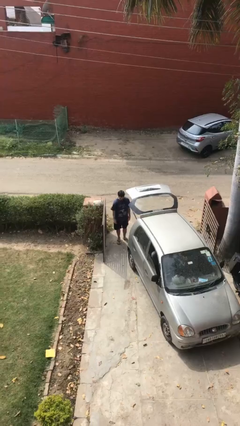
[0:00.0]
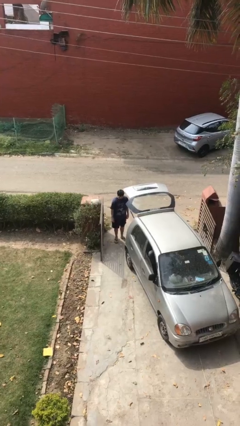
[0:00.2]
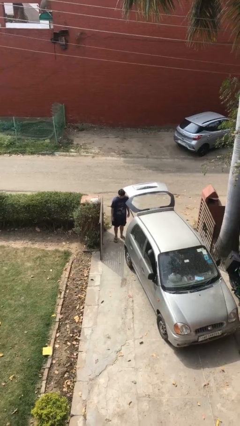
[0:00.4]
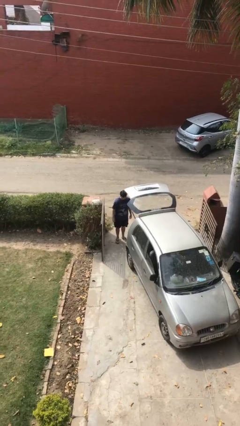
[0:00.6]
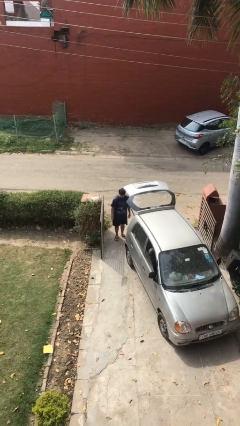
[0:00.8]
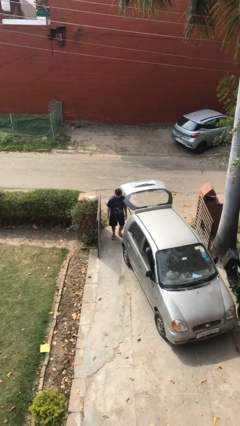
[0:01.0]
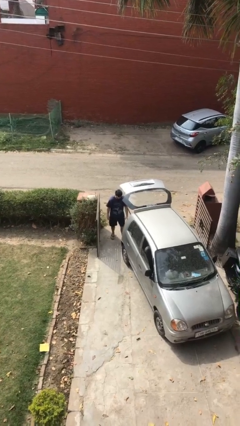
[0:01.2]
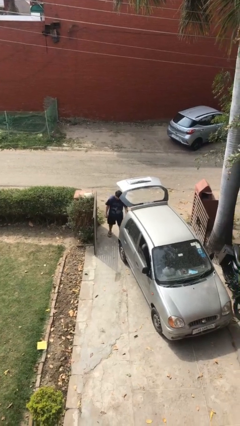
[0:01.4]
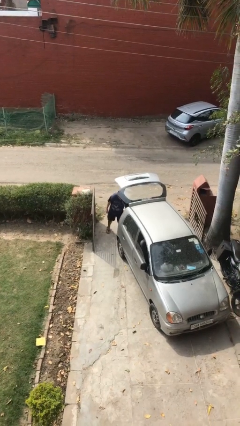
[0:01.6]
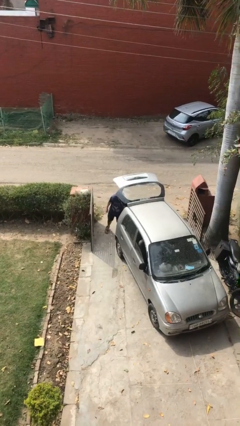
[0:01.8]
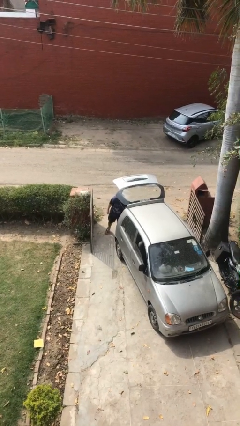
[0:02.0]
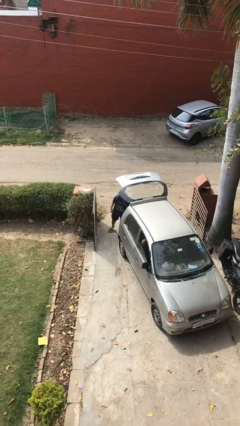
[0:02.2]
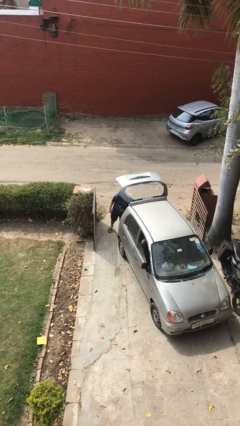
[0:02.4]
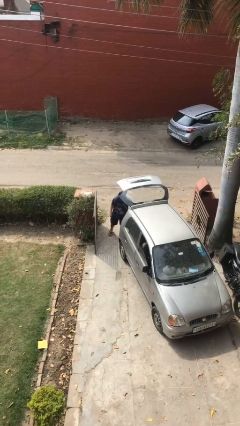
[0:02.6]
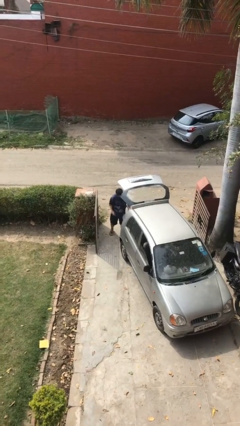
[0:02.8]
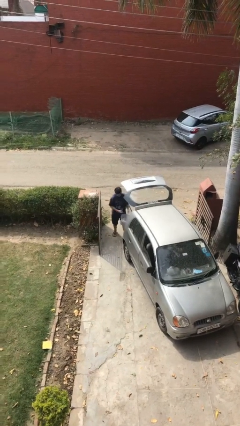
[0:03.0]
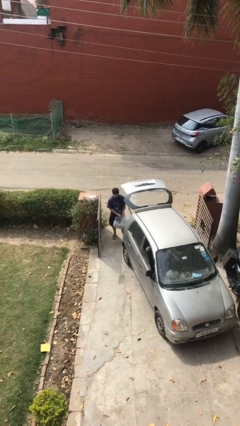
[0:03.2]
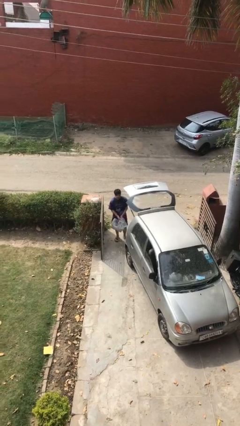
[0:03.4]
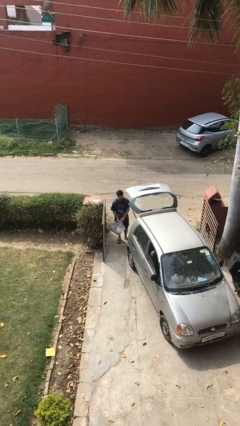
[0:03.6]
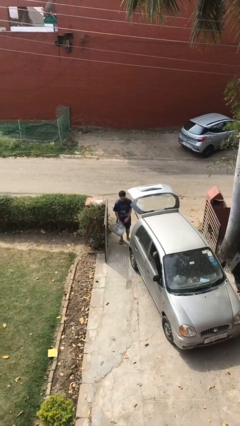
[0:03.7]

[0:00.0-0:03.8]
person unloads car

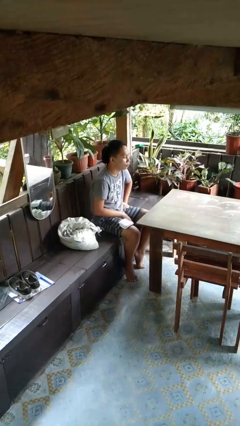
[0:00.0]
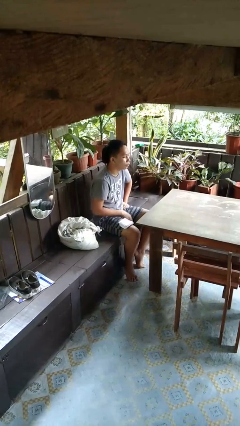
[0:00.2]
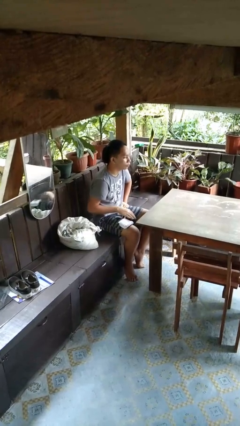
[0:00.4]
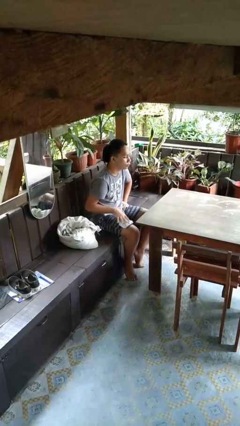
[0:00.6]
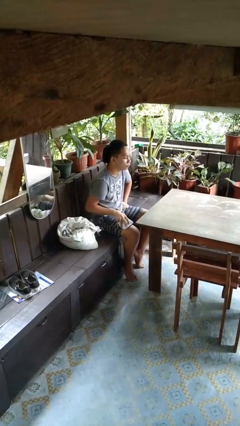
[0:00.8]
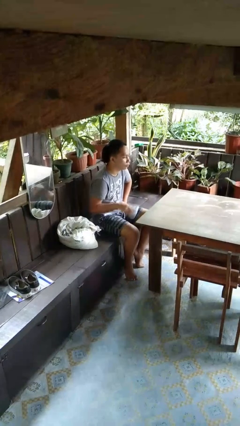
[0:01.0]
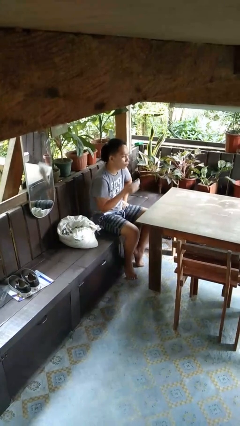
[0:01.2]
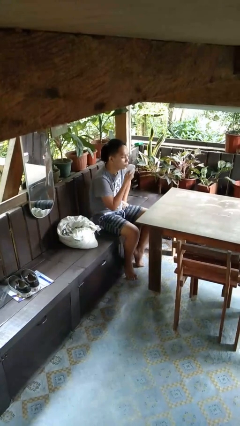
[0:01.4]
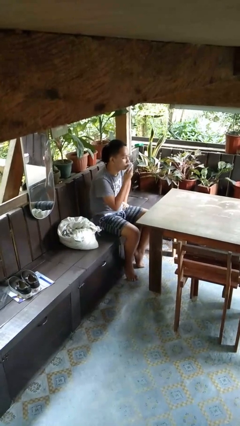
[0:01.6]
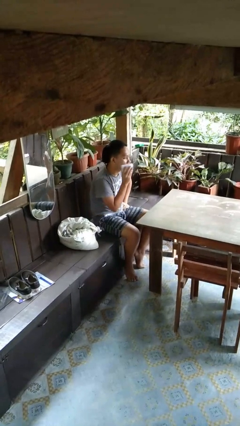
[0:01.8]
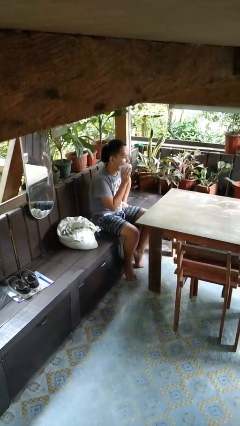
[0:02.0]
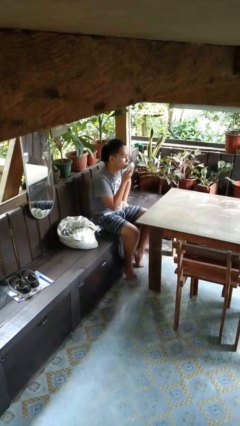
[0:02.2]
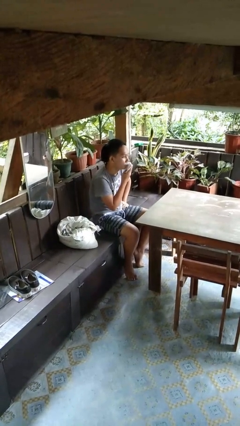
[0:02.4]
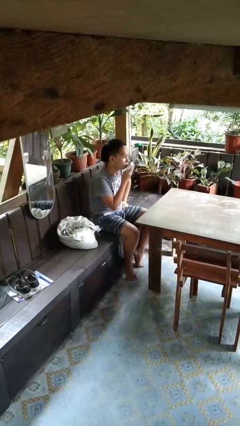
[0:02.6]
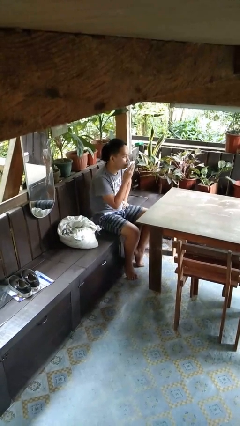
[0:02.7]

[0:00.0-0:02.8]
person wipes mouth with napkin

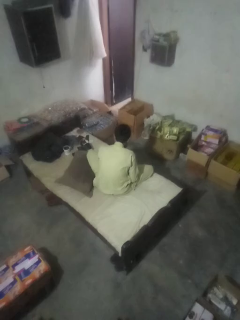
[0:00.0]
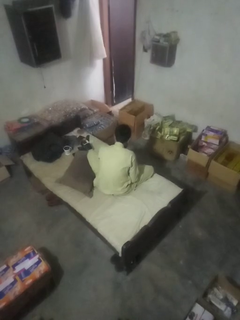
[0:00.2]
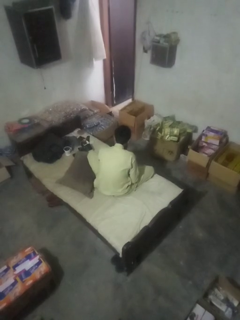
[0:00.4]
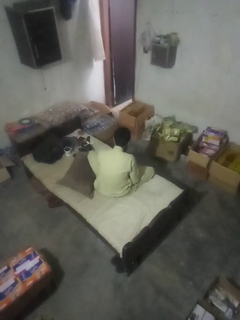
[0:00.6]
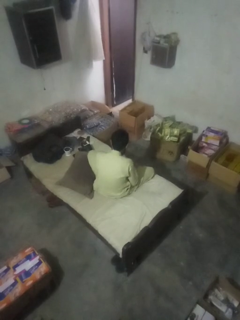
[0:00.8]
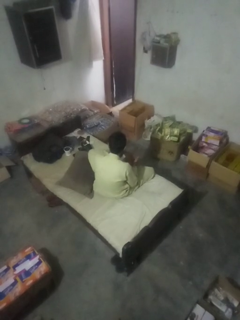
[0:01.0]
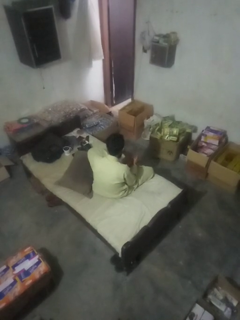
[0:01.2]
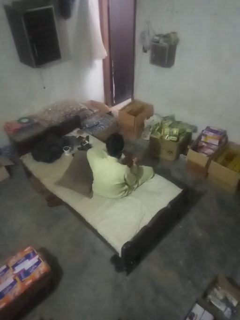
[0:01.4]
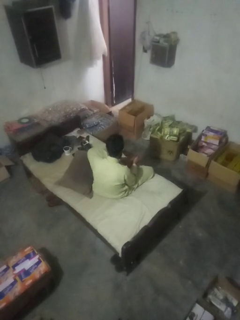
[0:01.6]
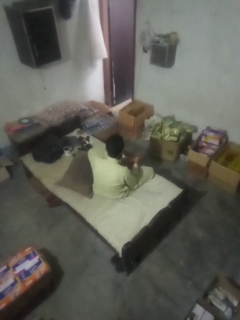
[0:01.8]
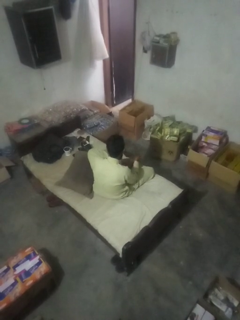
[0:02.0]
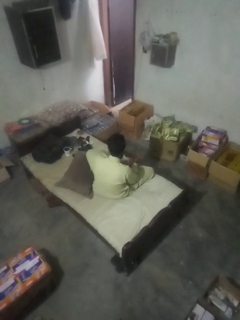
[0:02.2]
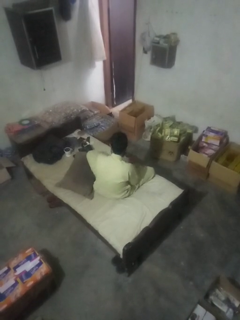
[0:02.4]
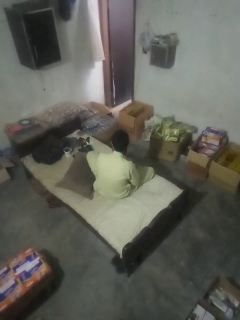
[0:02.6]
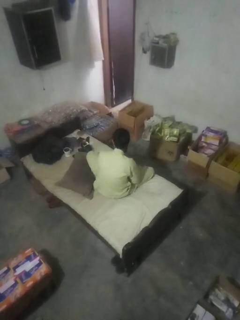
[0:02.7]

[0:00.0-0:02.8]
person rubs foot

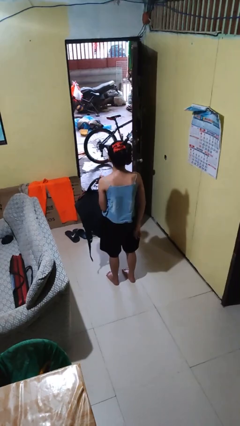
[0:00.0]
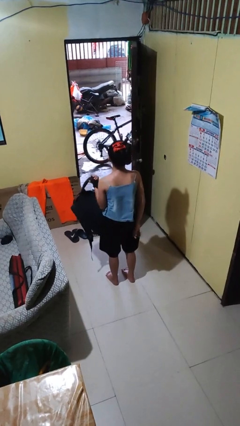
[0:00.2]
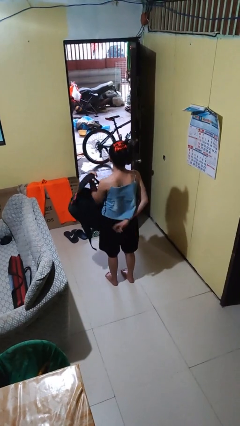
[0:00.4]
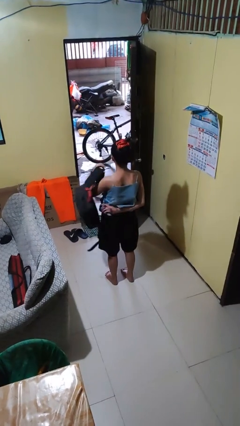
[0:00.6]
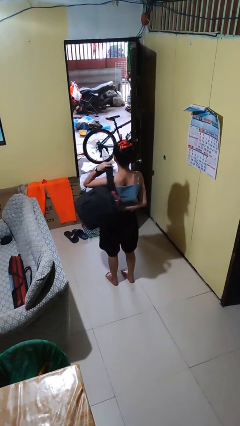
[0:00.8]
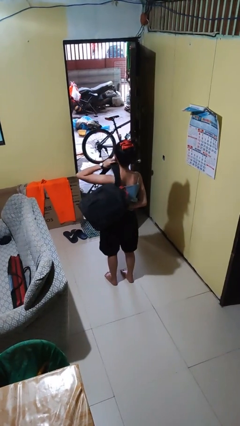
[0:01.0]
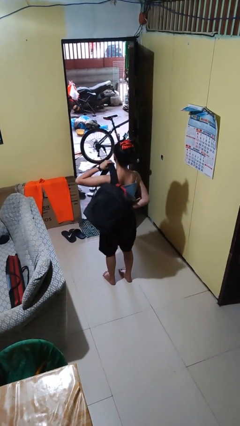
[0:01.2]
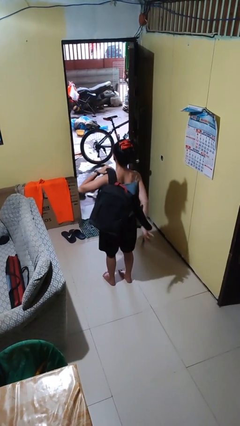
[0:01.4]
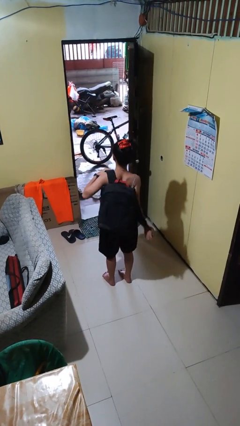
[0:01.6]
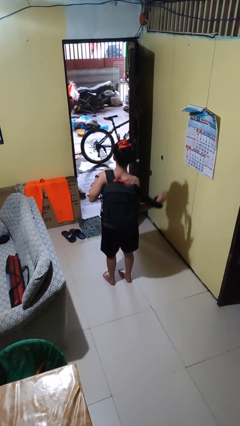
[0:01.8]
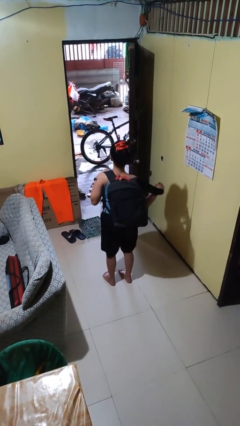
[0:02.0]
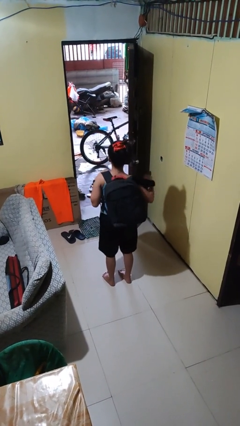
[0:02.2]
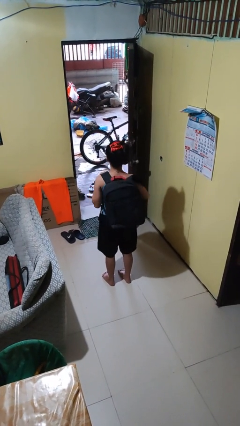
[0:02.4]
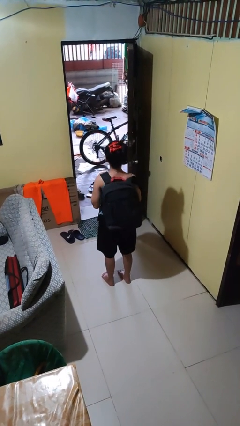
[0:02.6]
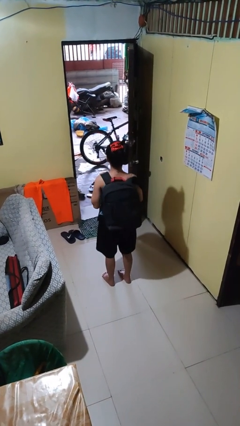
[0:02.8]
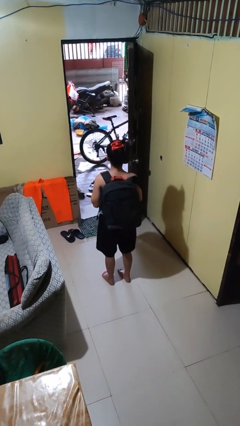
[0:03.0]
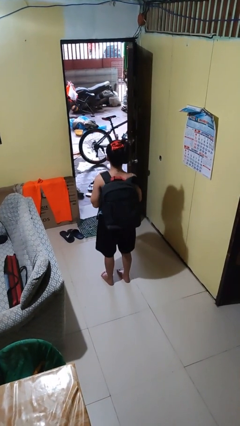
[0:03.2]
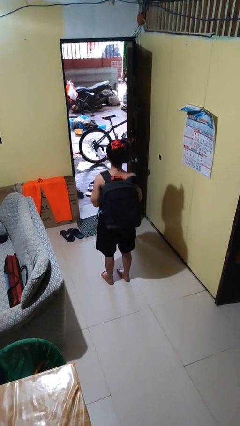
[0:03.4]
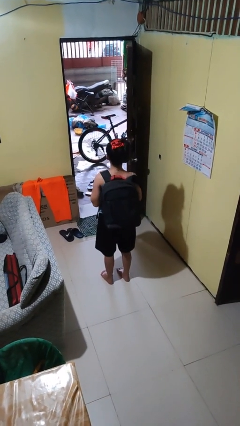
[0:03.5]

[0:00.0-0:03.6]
person puts on backpack

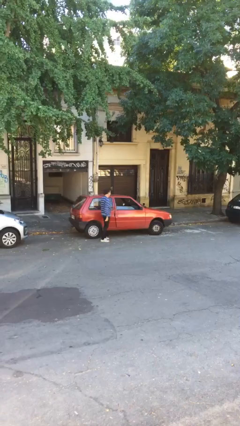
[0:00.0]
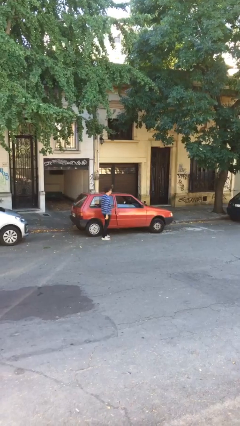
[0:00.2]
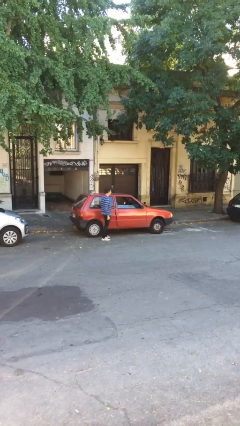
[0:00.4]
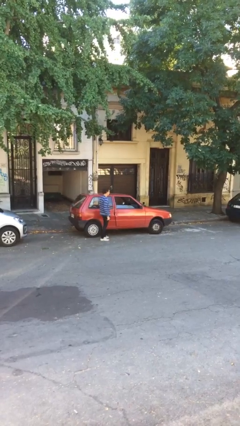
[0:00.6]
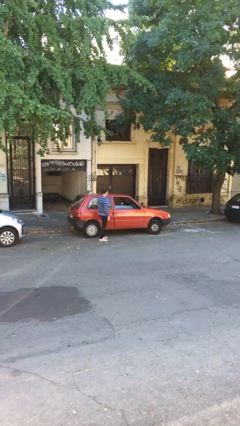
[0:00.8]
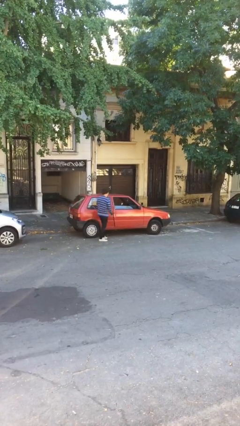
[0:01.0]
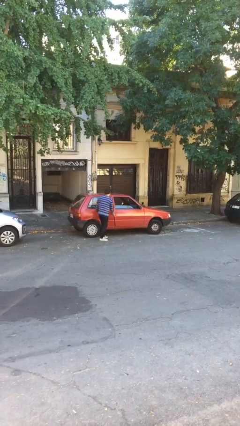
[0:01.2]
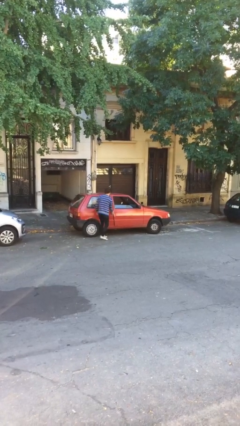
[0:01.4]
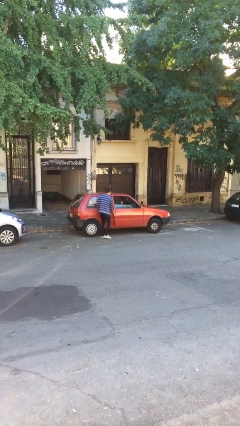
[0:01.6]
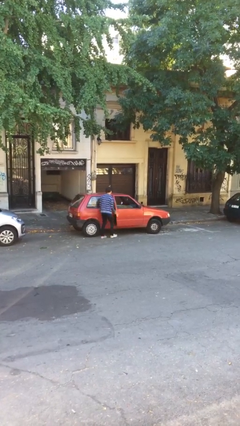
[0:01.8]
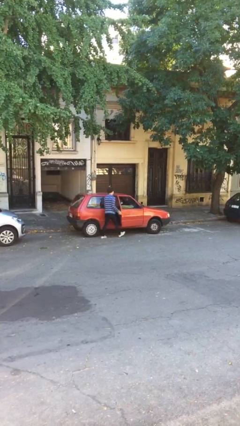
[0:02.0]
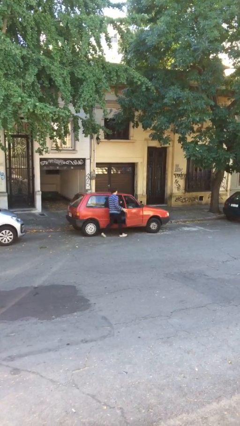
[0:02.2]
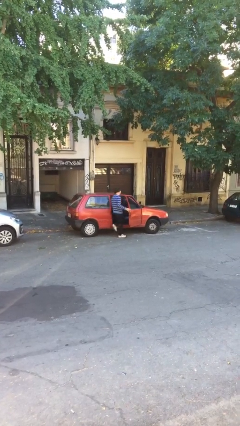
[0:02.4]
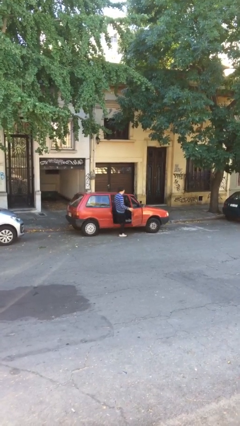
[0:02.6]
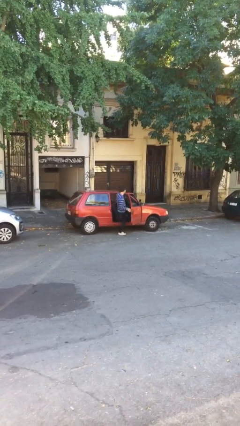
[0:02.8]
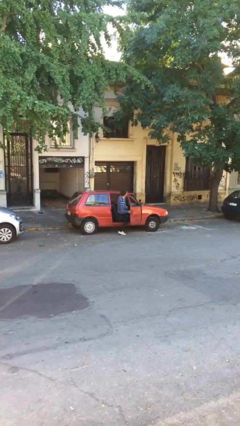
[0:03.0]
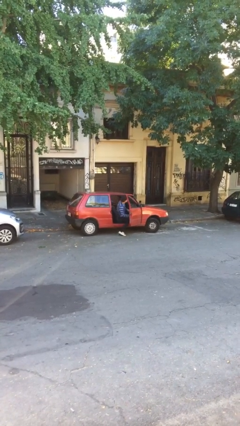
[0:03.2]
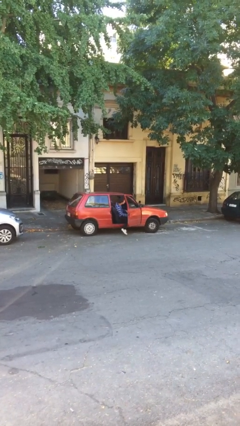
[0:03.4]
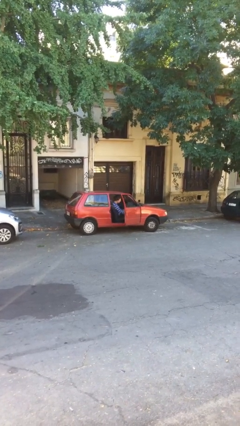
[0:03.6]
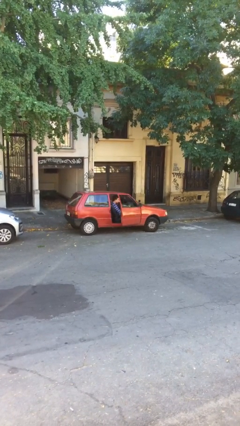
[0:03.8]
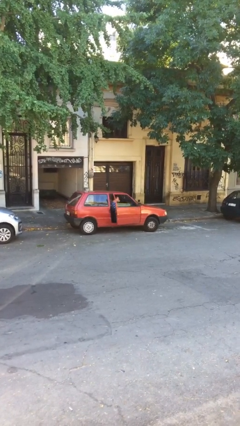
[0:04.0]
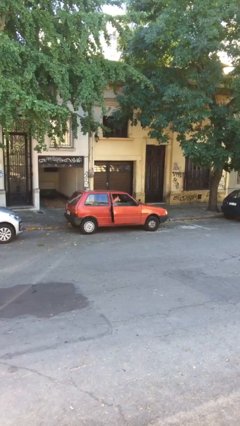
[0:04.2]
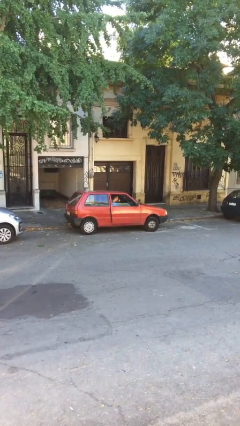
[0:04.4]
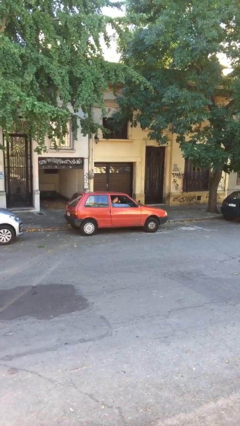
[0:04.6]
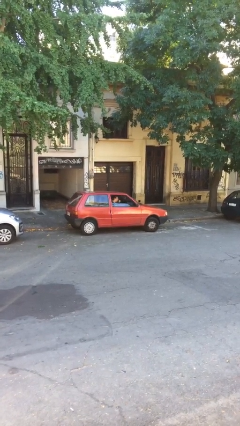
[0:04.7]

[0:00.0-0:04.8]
car picks up person

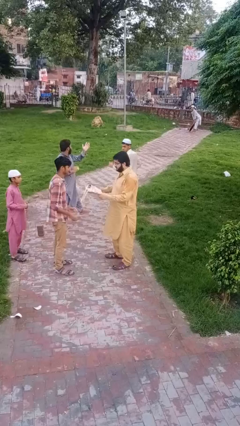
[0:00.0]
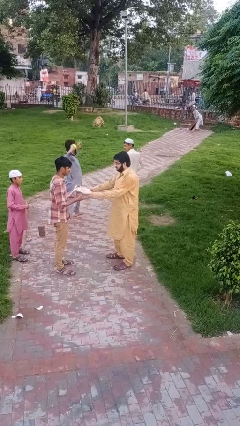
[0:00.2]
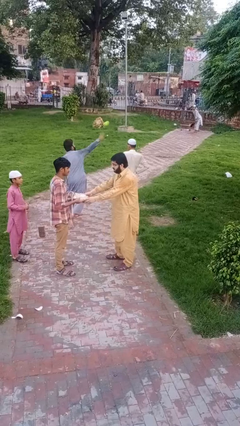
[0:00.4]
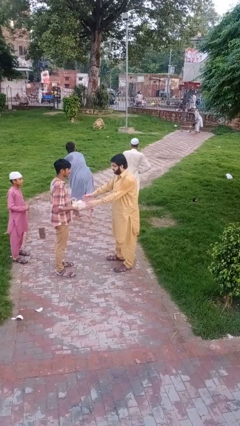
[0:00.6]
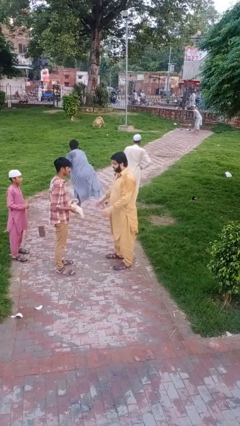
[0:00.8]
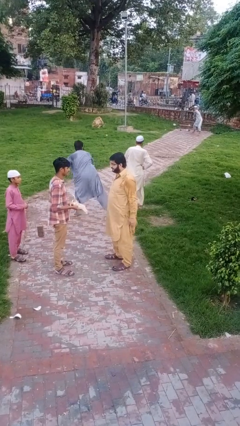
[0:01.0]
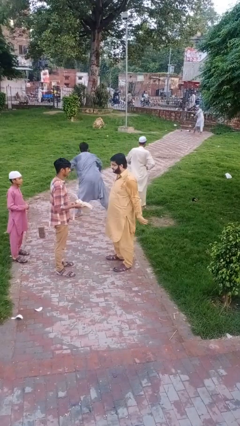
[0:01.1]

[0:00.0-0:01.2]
person transfers object to person
